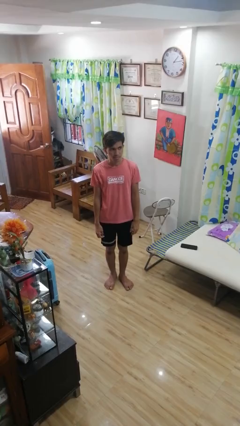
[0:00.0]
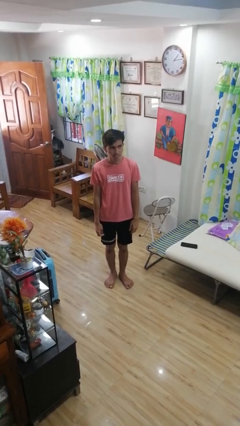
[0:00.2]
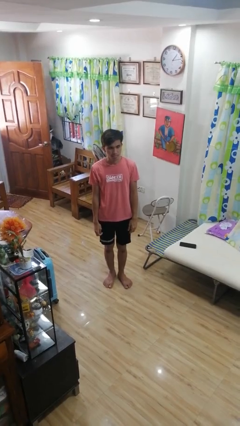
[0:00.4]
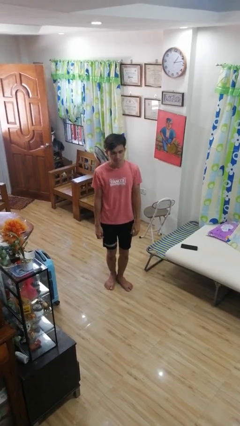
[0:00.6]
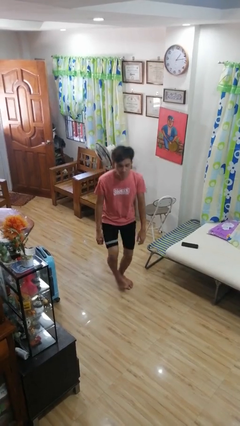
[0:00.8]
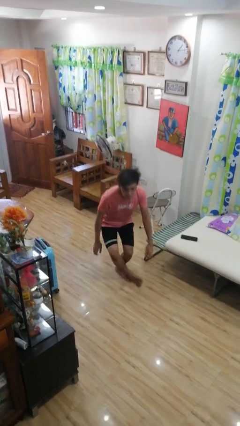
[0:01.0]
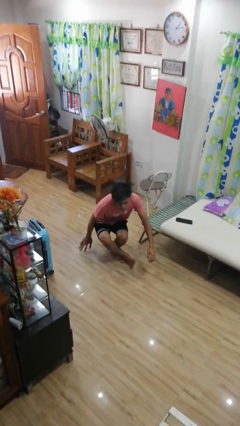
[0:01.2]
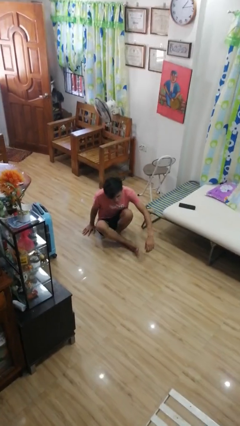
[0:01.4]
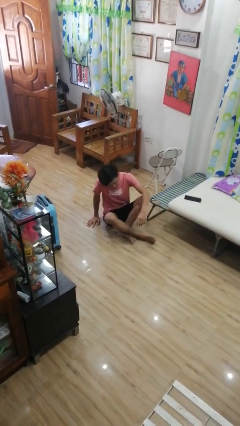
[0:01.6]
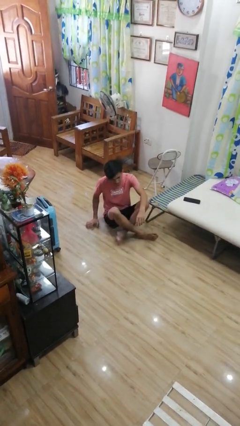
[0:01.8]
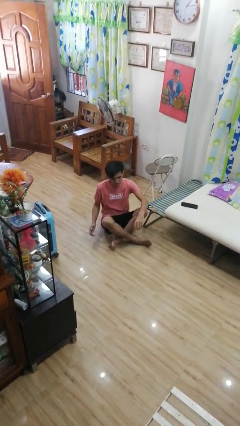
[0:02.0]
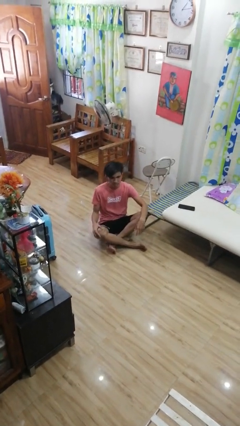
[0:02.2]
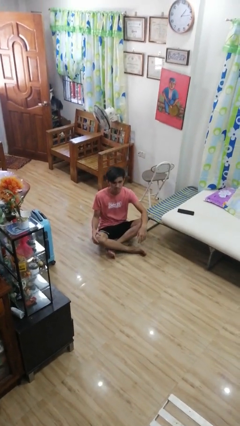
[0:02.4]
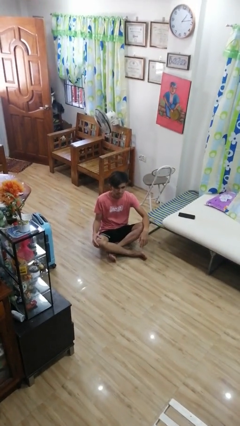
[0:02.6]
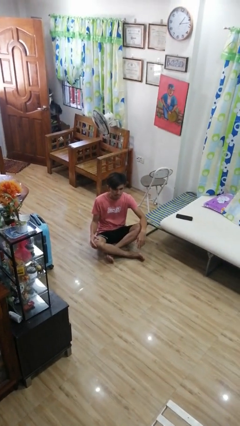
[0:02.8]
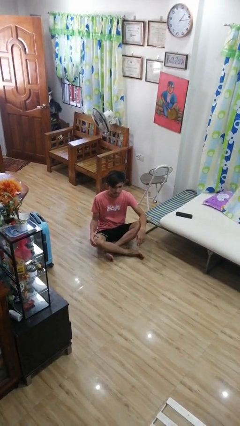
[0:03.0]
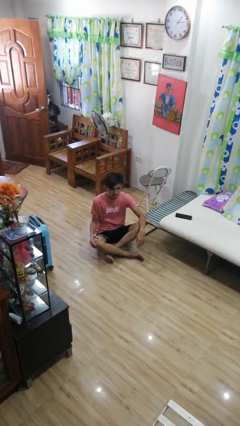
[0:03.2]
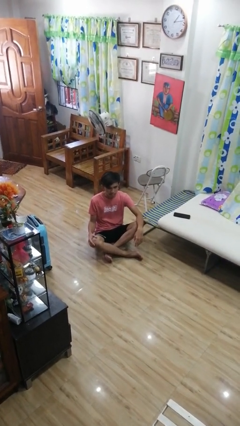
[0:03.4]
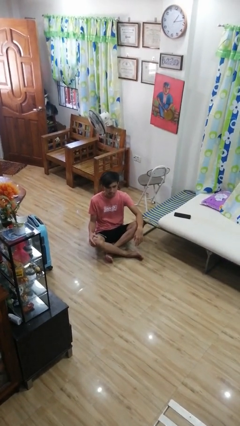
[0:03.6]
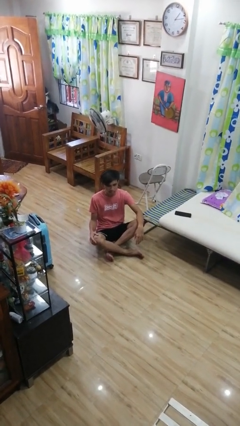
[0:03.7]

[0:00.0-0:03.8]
person sits crisscross

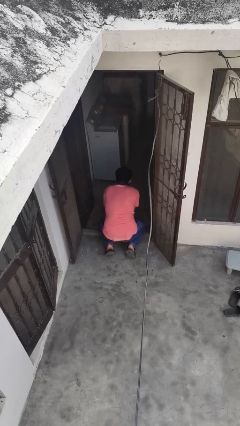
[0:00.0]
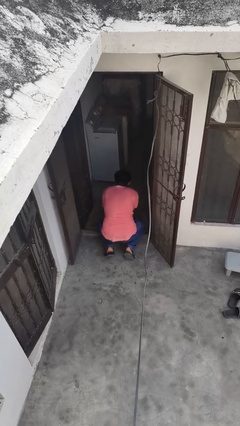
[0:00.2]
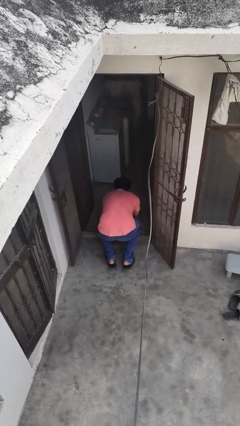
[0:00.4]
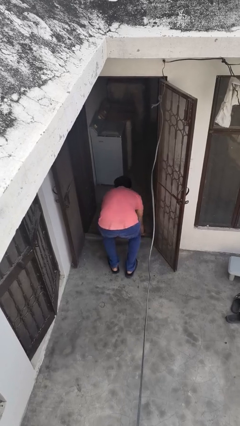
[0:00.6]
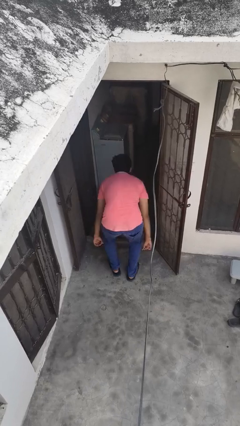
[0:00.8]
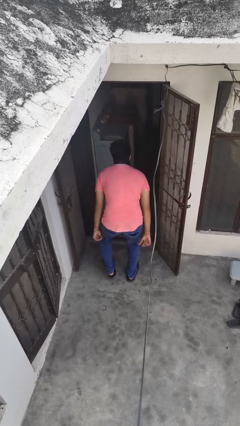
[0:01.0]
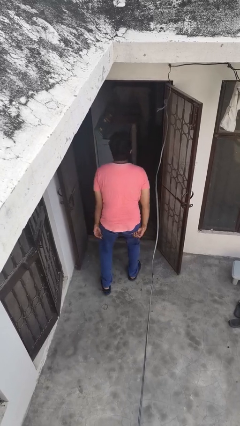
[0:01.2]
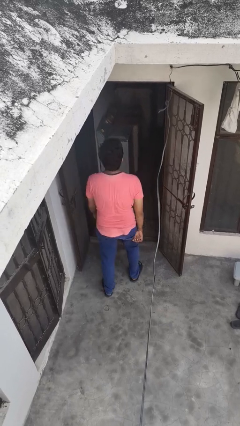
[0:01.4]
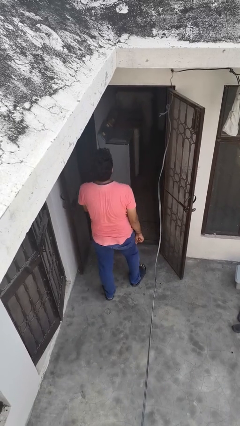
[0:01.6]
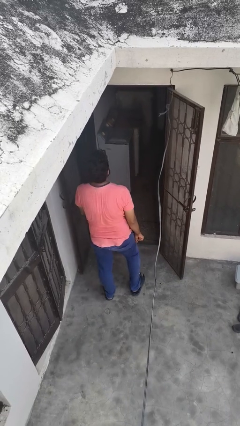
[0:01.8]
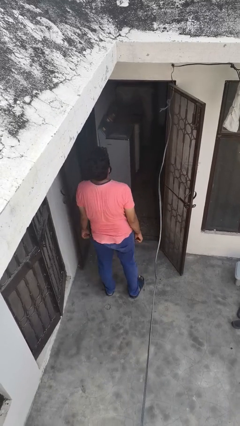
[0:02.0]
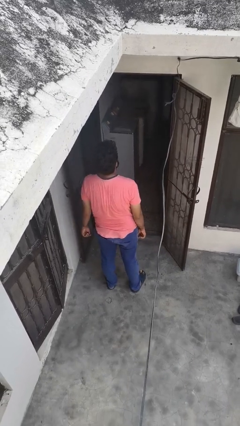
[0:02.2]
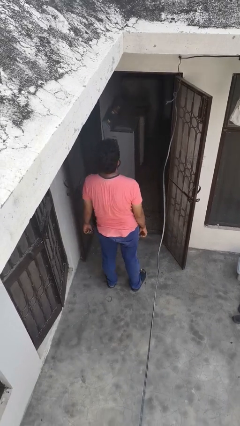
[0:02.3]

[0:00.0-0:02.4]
person stands up from floor

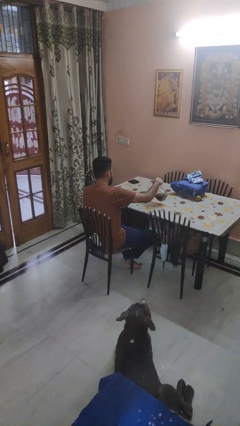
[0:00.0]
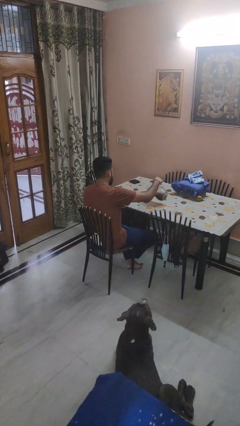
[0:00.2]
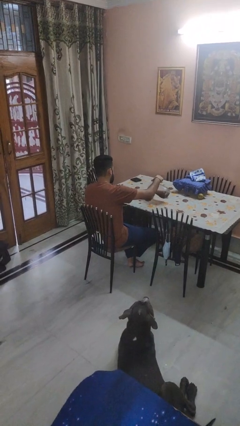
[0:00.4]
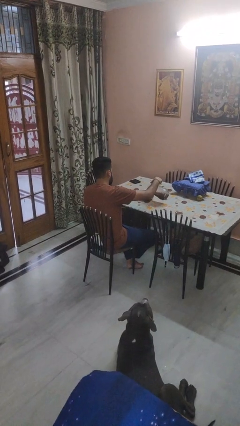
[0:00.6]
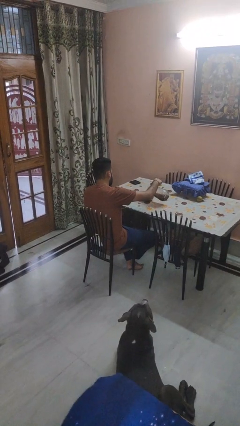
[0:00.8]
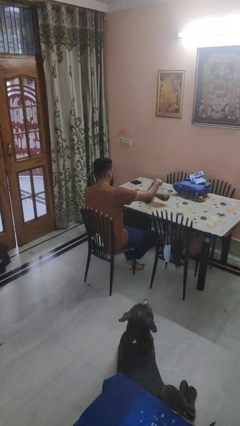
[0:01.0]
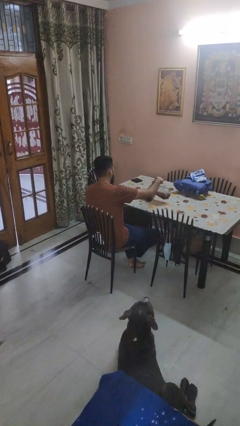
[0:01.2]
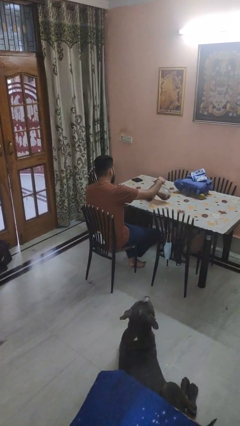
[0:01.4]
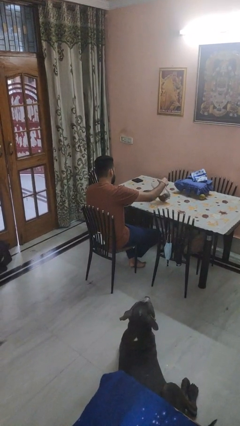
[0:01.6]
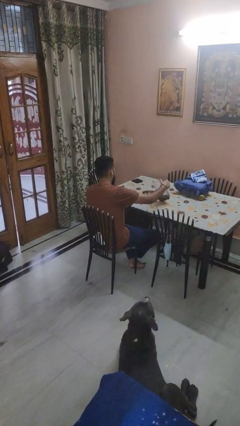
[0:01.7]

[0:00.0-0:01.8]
person pours into bowl

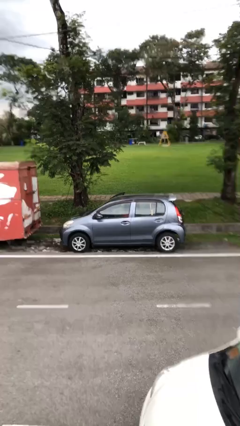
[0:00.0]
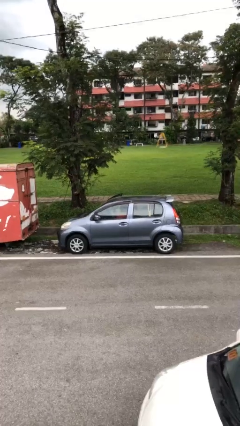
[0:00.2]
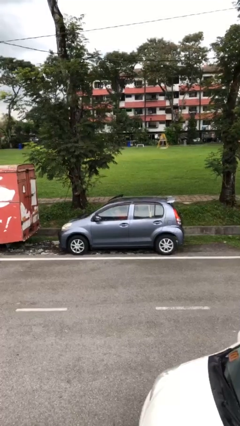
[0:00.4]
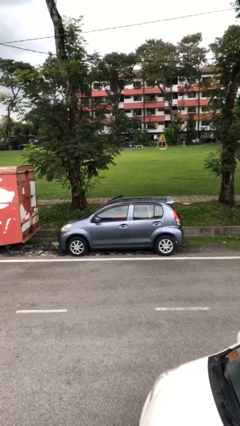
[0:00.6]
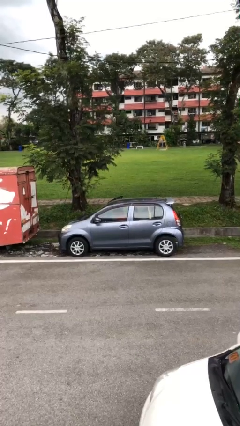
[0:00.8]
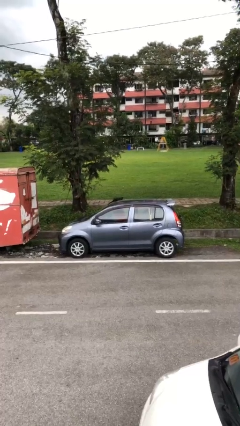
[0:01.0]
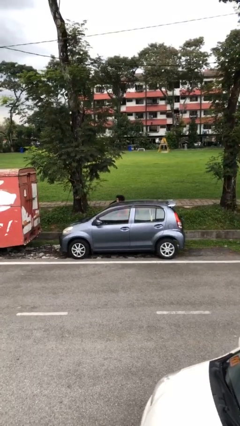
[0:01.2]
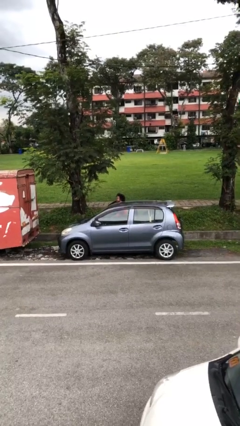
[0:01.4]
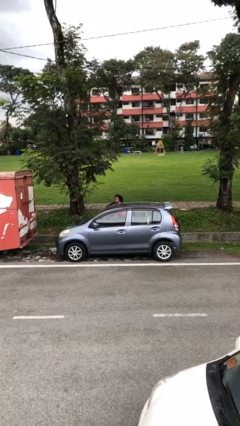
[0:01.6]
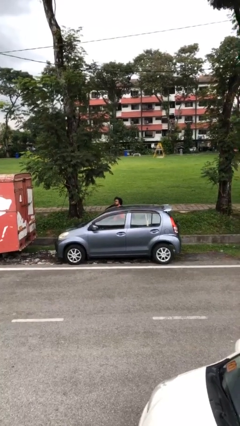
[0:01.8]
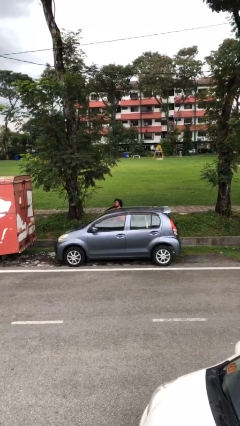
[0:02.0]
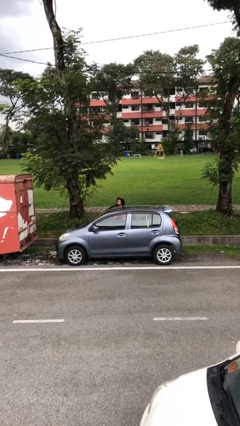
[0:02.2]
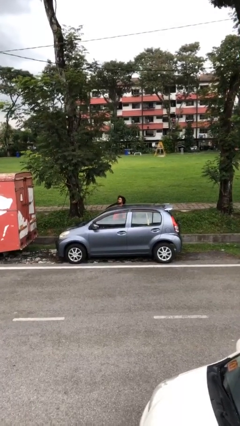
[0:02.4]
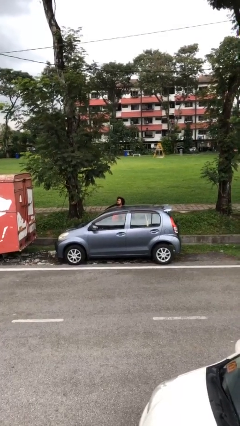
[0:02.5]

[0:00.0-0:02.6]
person exits car

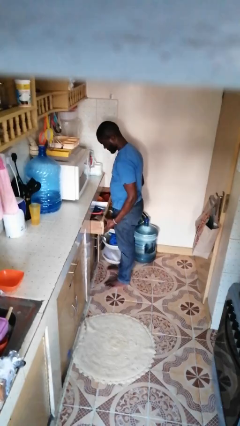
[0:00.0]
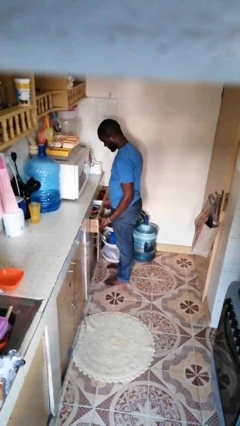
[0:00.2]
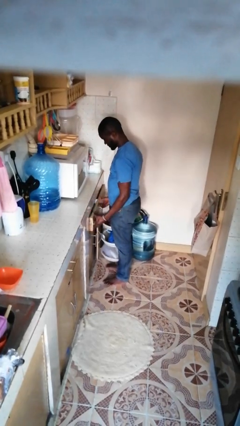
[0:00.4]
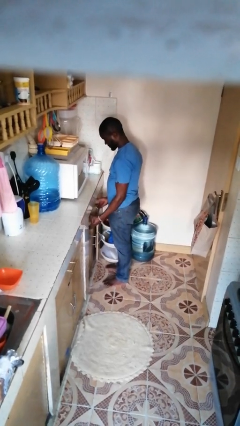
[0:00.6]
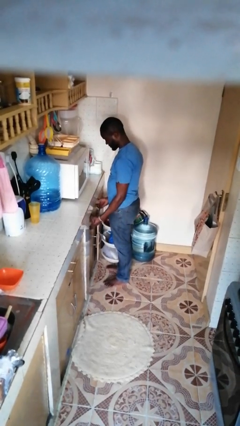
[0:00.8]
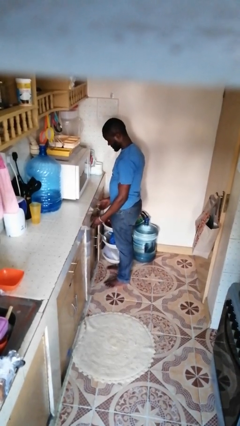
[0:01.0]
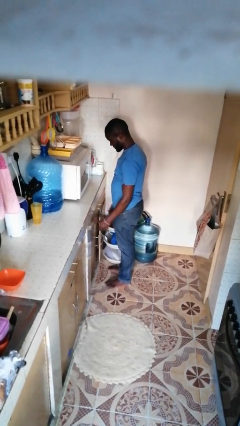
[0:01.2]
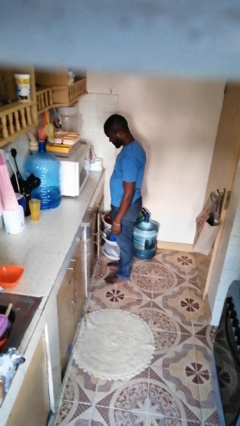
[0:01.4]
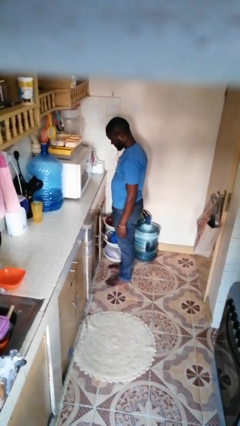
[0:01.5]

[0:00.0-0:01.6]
person closes kitchen drawer

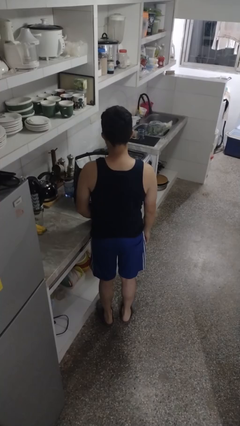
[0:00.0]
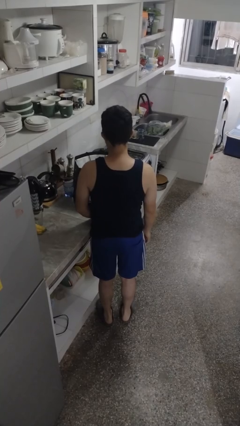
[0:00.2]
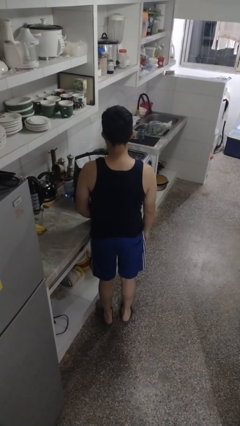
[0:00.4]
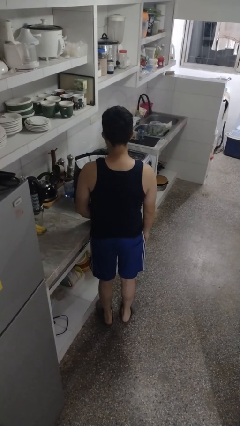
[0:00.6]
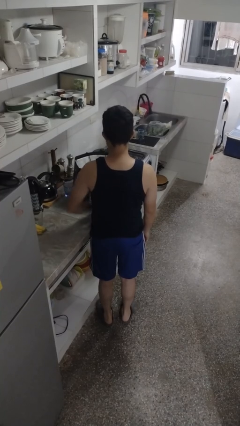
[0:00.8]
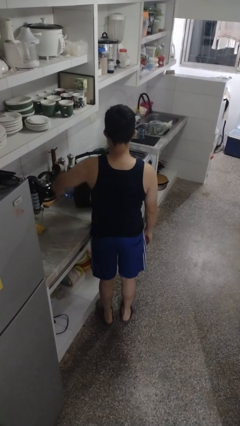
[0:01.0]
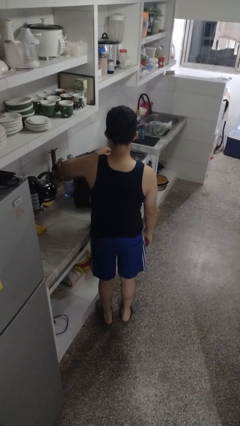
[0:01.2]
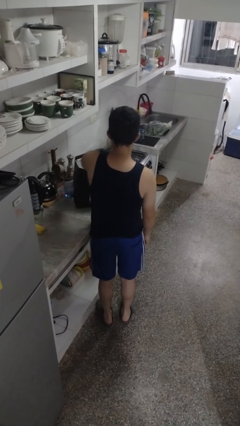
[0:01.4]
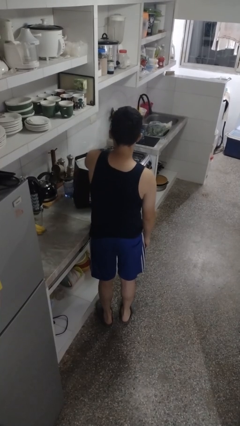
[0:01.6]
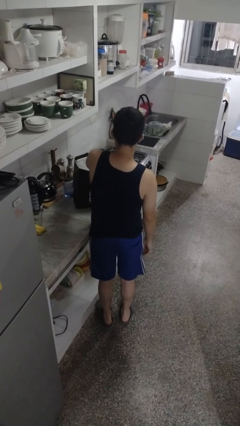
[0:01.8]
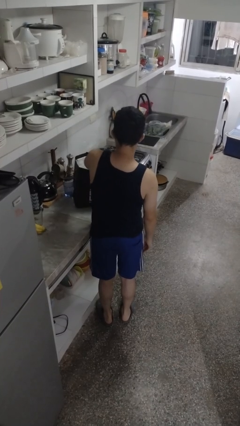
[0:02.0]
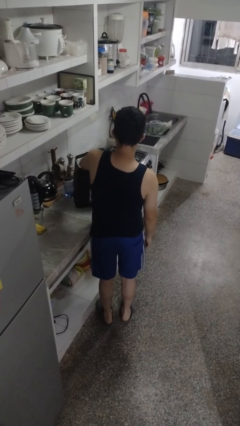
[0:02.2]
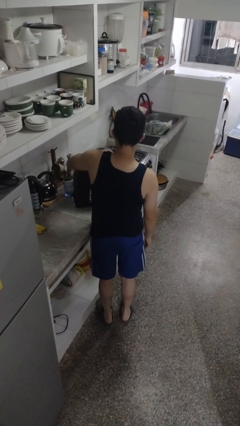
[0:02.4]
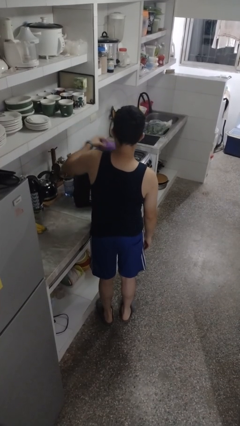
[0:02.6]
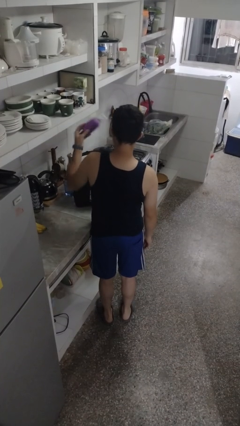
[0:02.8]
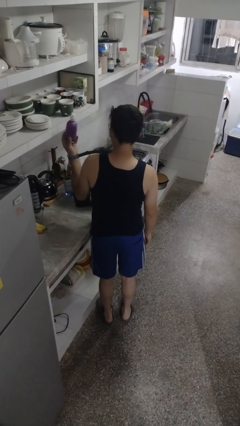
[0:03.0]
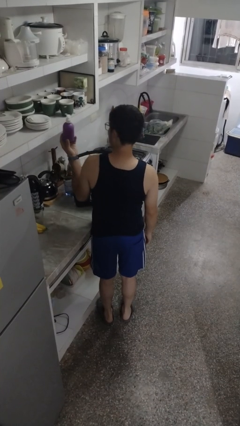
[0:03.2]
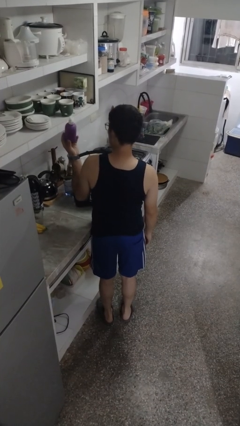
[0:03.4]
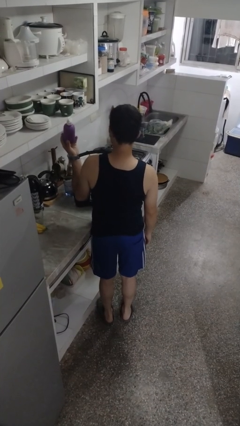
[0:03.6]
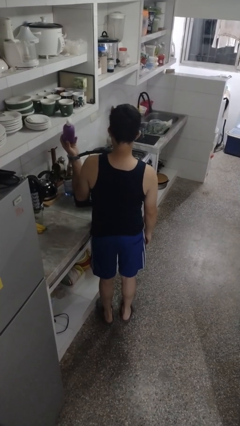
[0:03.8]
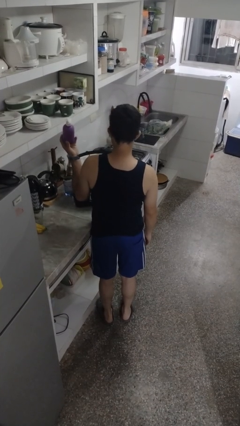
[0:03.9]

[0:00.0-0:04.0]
person takes object from bag

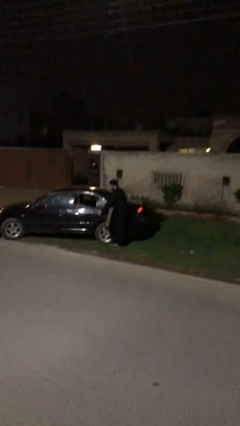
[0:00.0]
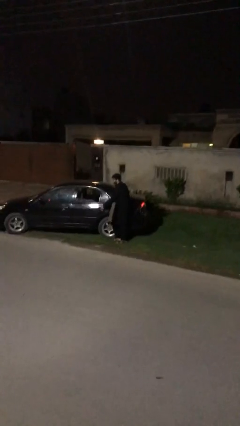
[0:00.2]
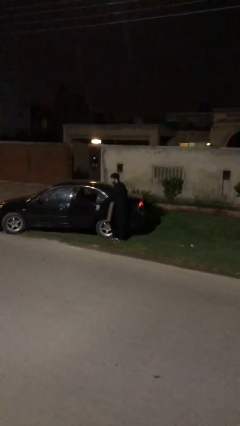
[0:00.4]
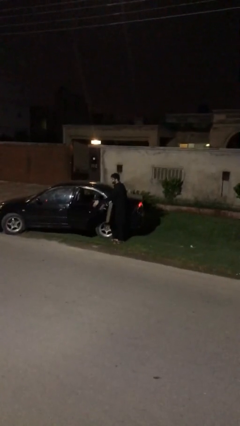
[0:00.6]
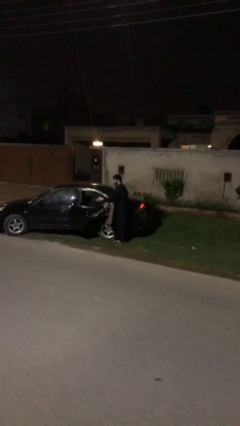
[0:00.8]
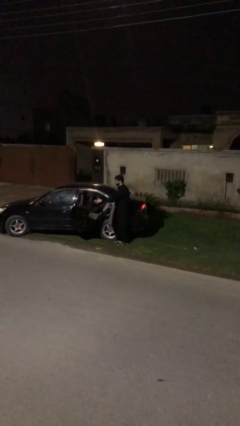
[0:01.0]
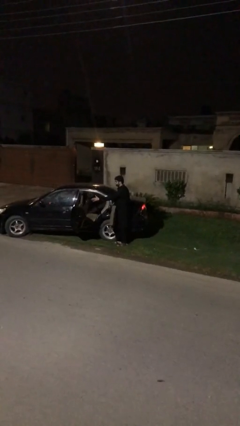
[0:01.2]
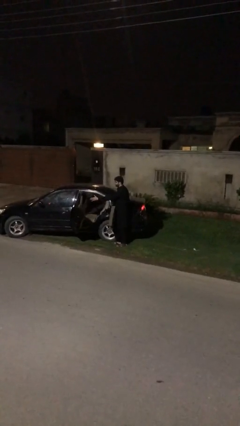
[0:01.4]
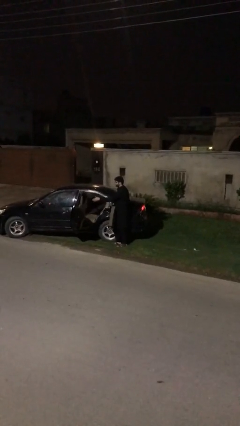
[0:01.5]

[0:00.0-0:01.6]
person opens car door
